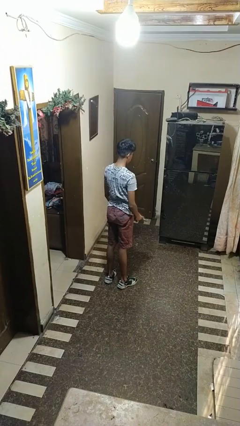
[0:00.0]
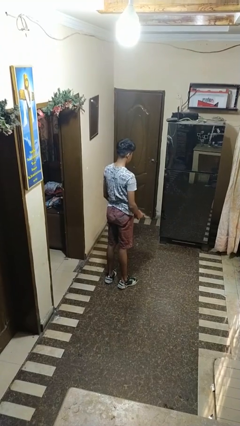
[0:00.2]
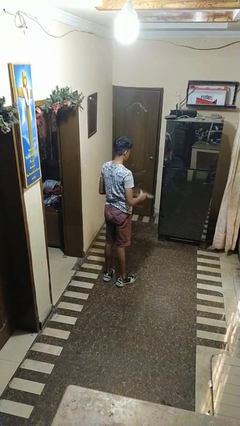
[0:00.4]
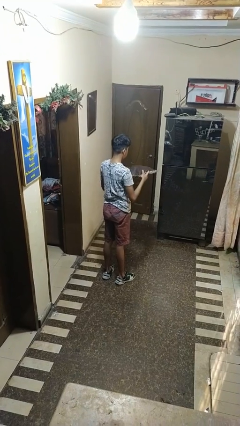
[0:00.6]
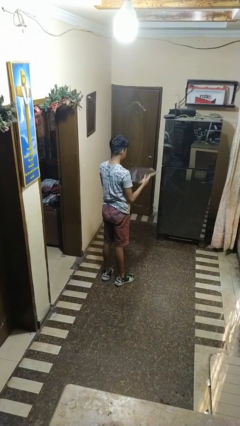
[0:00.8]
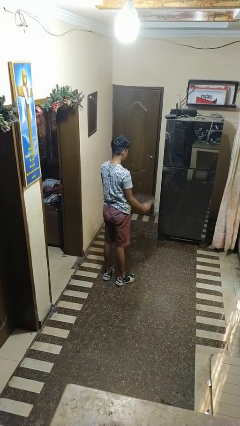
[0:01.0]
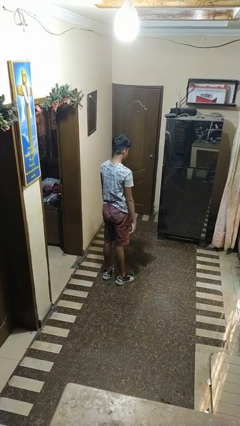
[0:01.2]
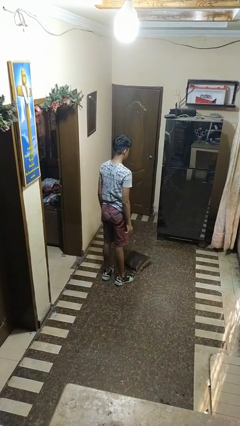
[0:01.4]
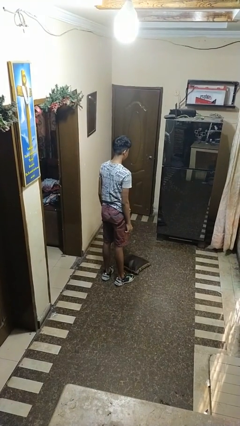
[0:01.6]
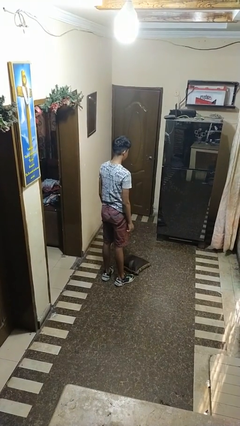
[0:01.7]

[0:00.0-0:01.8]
person throws object to ground

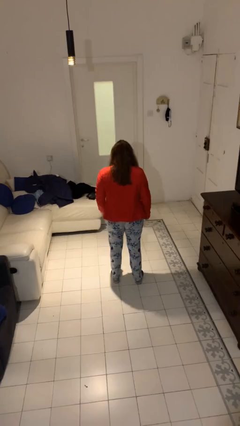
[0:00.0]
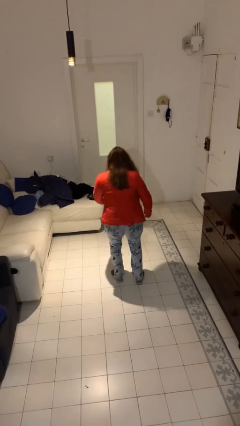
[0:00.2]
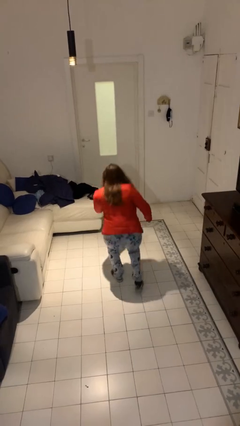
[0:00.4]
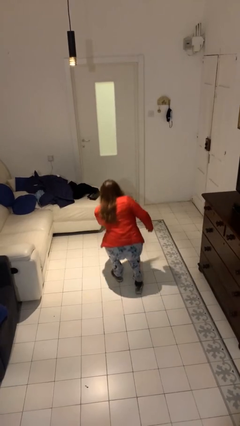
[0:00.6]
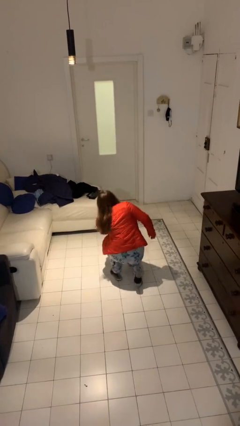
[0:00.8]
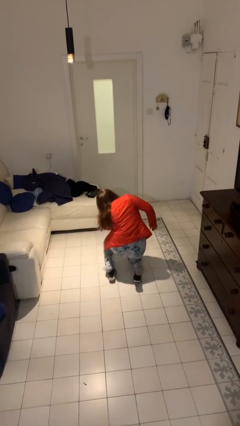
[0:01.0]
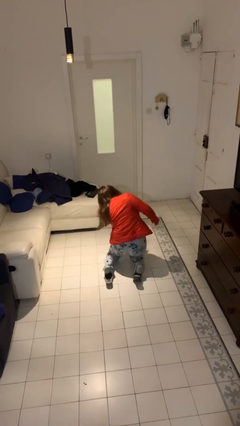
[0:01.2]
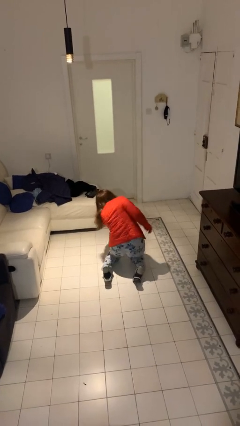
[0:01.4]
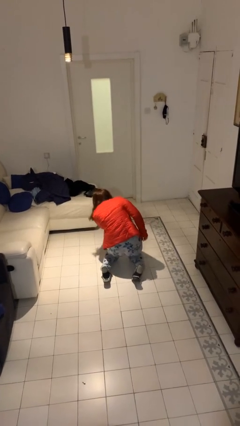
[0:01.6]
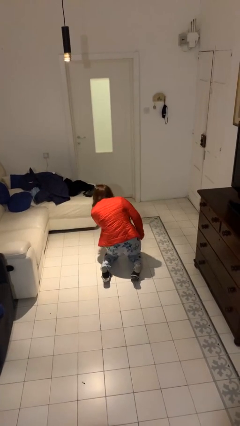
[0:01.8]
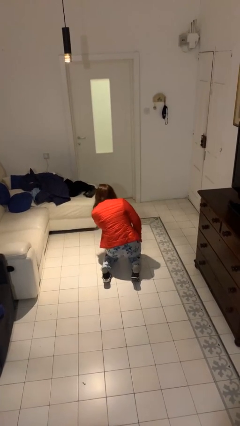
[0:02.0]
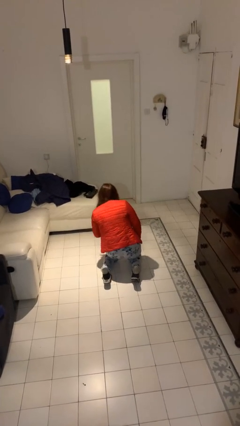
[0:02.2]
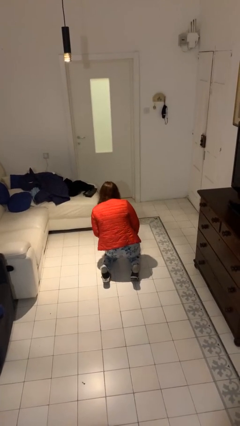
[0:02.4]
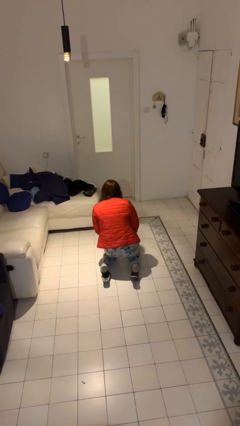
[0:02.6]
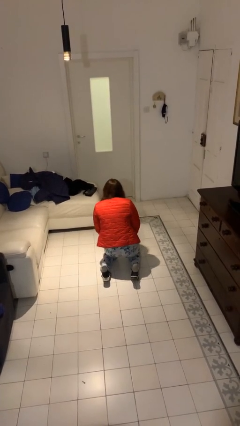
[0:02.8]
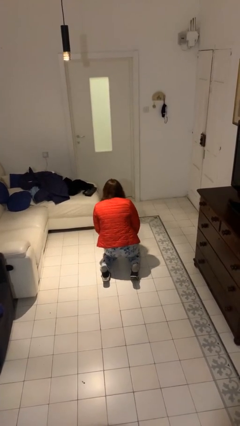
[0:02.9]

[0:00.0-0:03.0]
person falls while standing

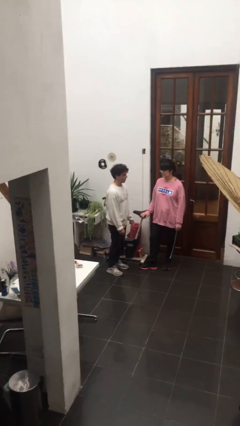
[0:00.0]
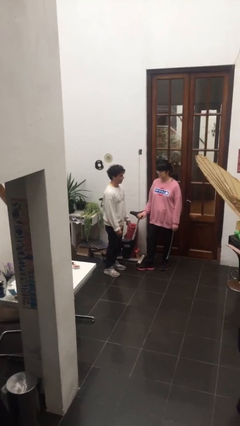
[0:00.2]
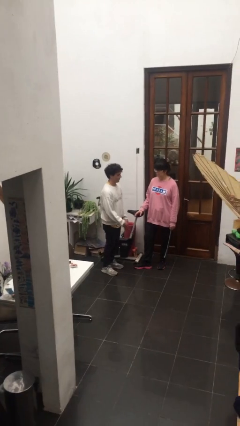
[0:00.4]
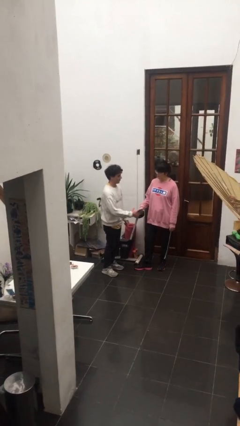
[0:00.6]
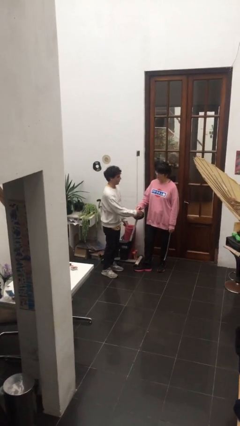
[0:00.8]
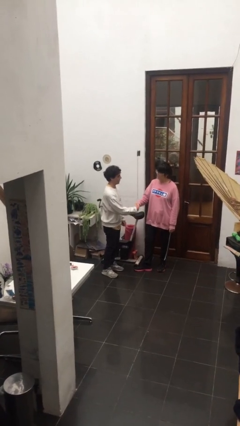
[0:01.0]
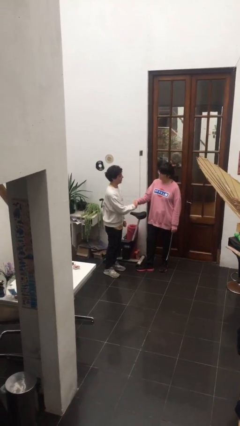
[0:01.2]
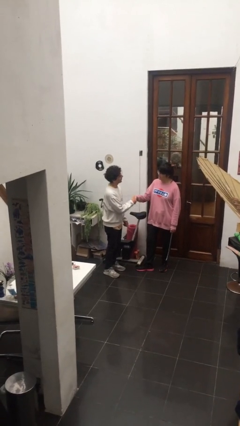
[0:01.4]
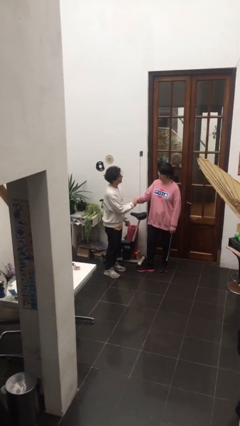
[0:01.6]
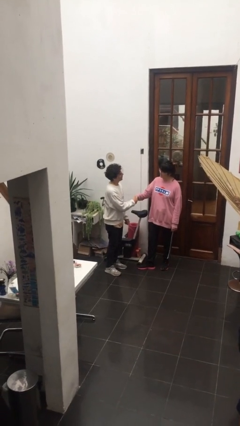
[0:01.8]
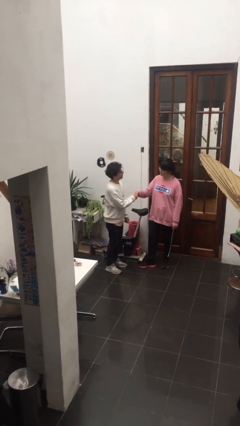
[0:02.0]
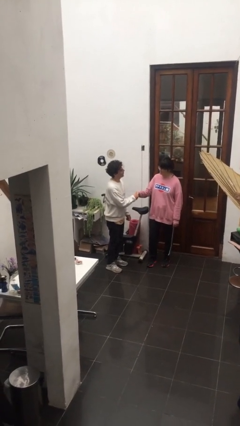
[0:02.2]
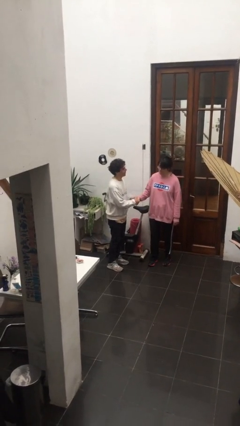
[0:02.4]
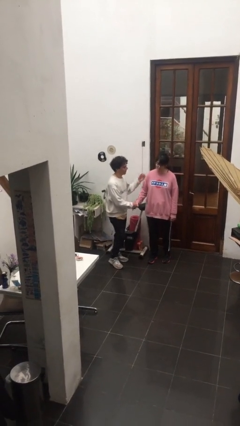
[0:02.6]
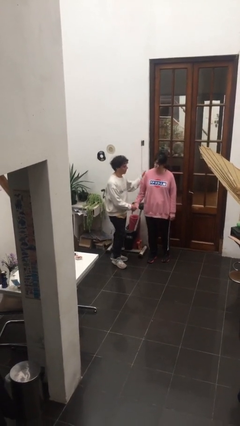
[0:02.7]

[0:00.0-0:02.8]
person shakes hand

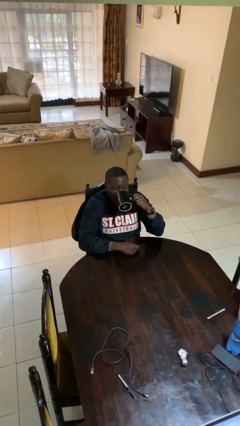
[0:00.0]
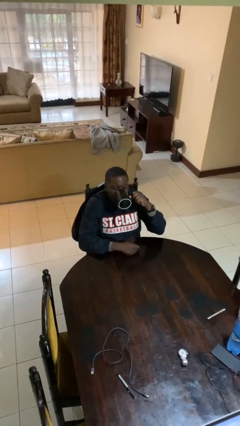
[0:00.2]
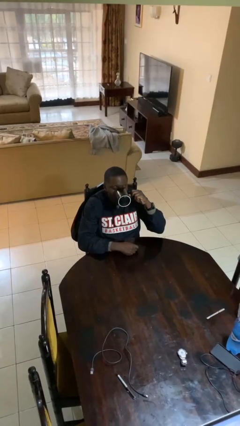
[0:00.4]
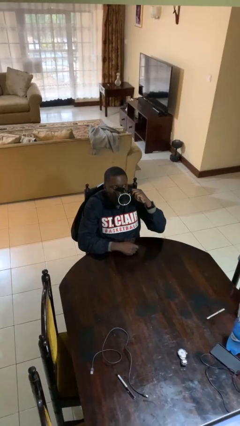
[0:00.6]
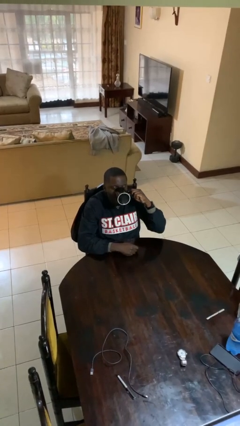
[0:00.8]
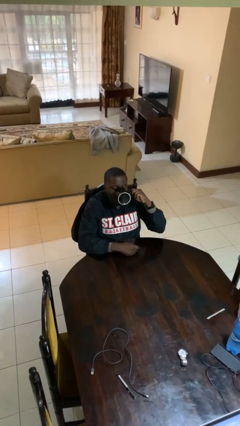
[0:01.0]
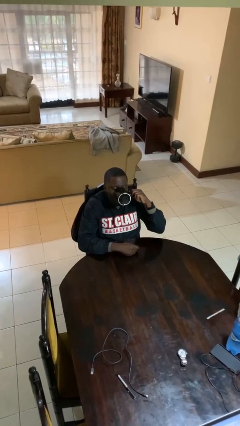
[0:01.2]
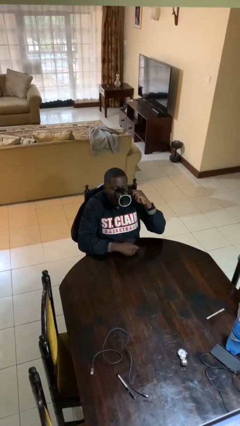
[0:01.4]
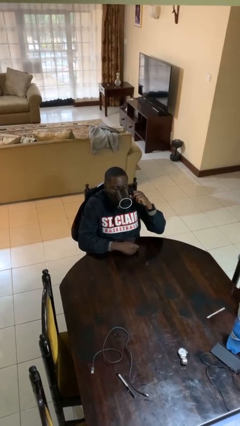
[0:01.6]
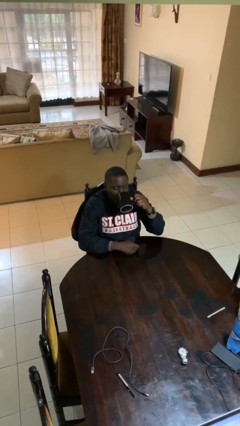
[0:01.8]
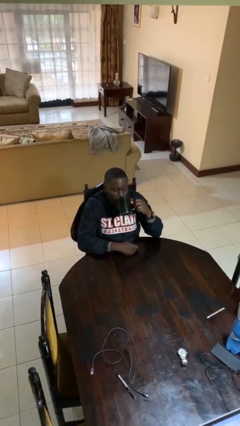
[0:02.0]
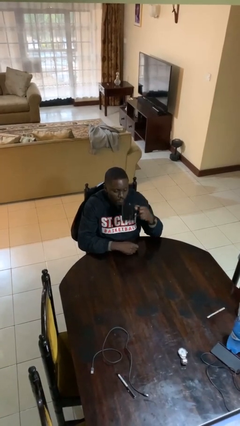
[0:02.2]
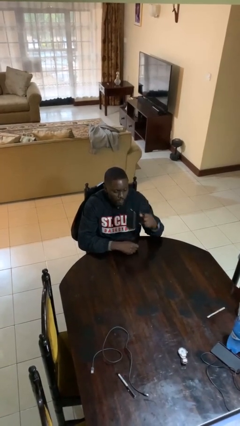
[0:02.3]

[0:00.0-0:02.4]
person drinks from mug

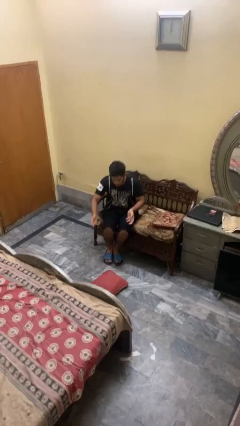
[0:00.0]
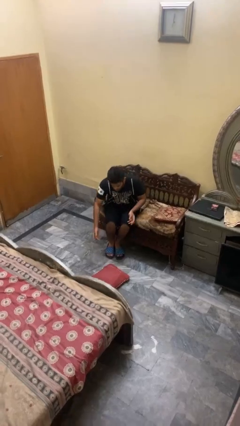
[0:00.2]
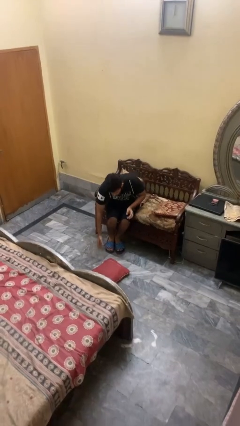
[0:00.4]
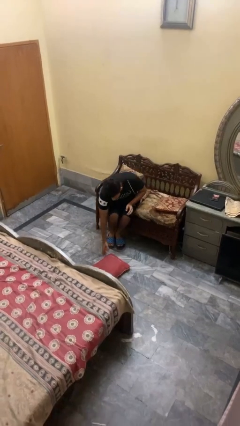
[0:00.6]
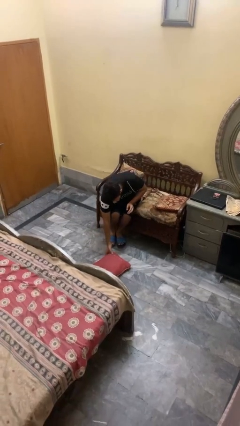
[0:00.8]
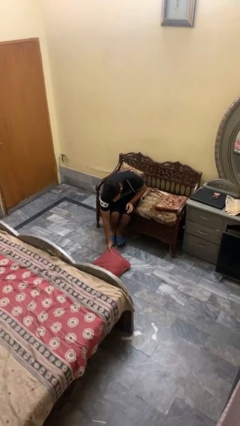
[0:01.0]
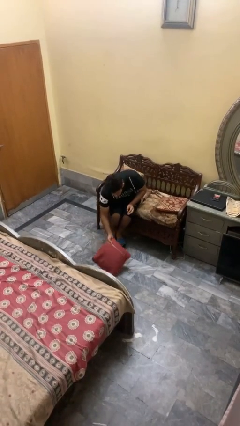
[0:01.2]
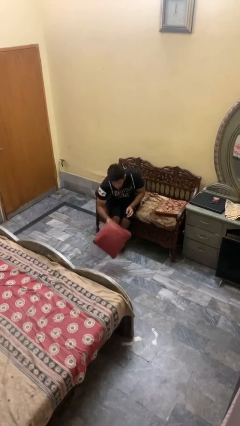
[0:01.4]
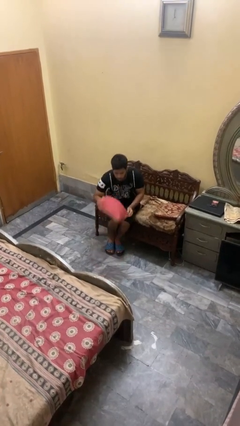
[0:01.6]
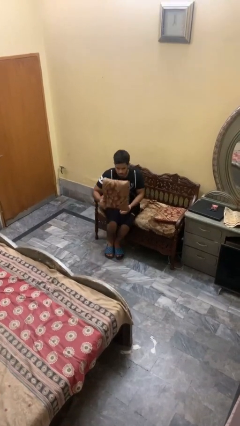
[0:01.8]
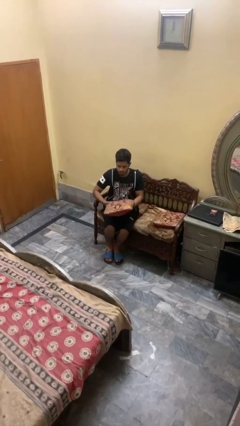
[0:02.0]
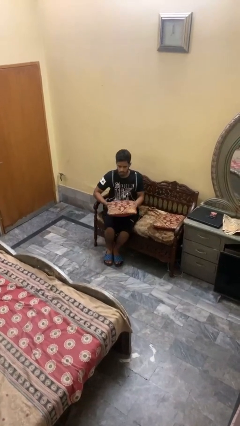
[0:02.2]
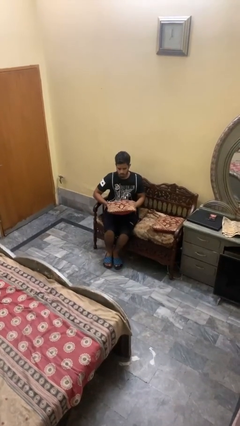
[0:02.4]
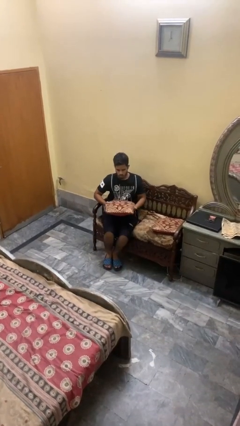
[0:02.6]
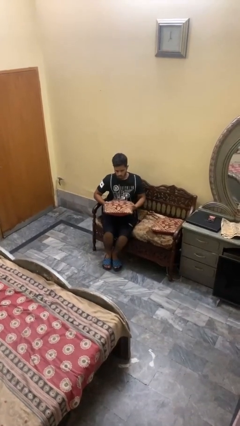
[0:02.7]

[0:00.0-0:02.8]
person picks up object from floor

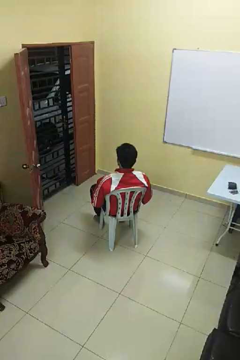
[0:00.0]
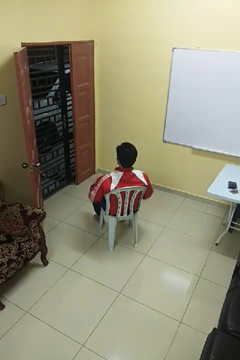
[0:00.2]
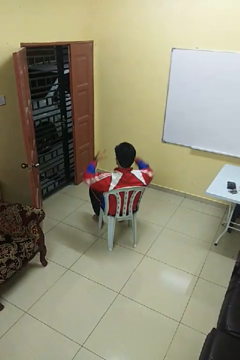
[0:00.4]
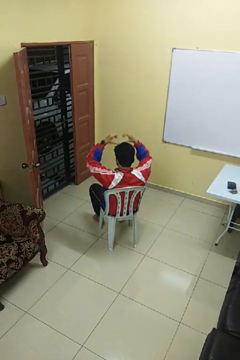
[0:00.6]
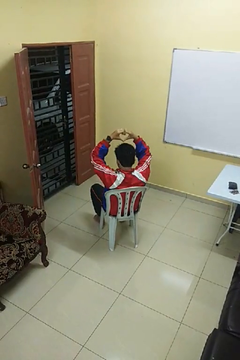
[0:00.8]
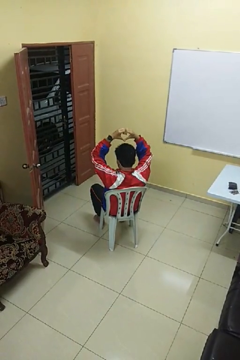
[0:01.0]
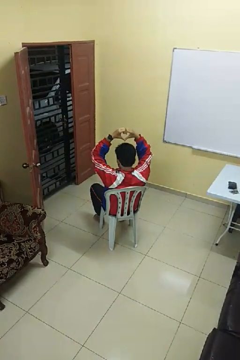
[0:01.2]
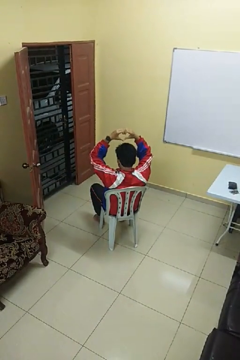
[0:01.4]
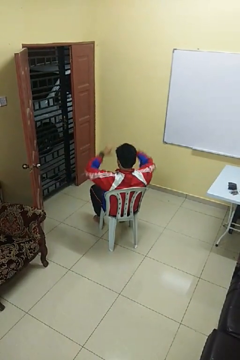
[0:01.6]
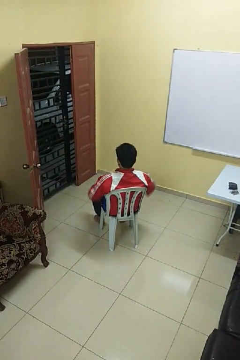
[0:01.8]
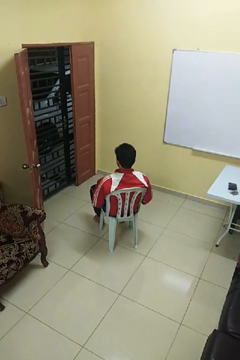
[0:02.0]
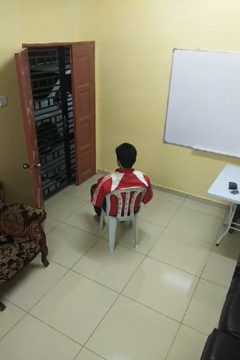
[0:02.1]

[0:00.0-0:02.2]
person gestures heart

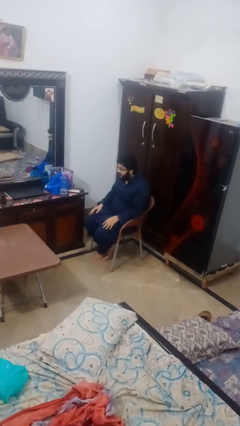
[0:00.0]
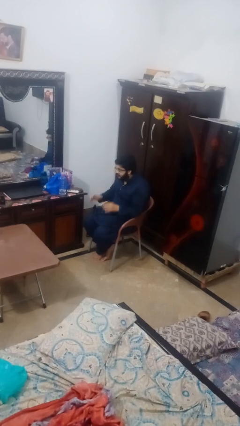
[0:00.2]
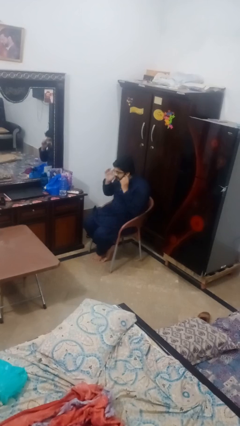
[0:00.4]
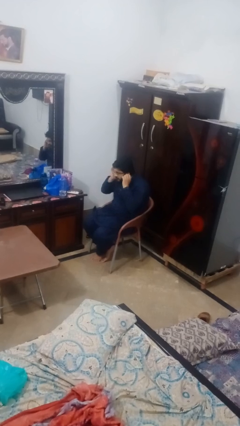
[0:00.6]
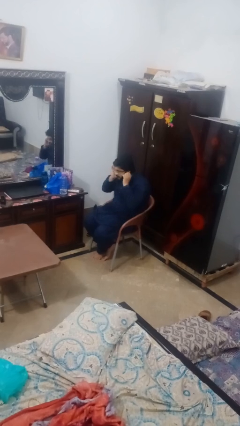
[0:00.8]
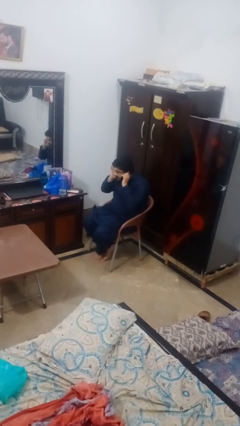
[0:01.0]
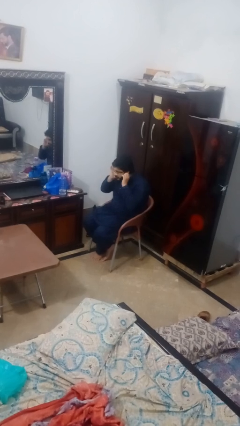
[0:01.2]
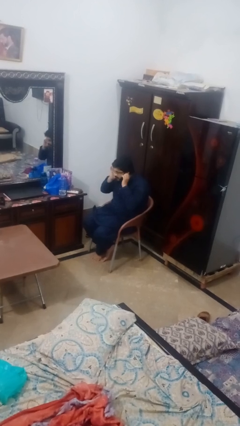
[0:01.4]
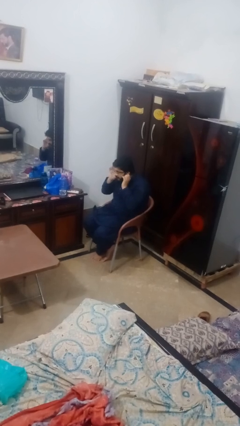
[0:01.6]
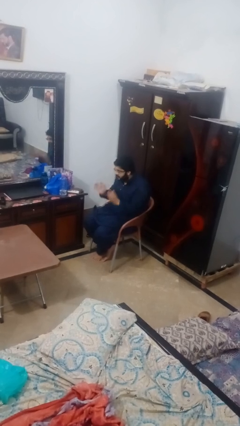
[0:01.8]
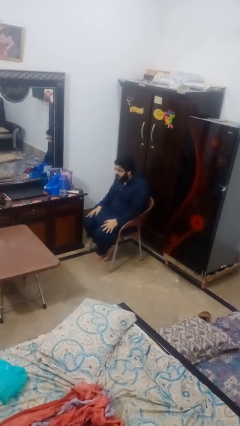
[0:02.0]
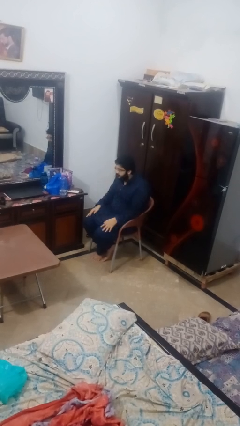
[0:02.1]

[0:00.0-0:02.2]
person puts fingers in ear

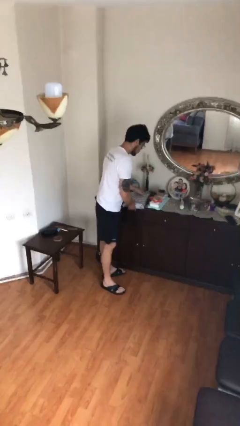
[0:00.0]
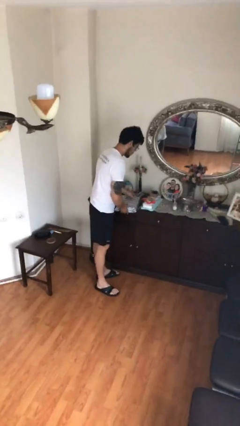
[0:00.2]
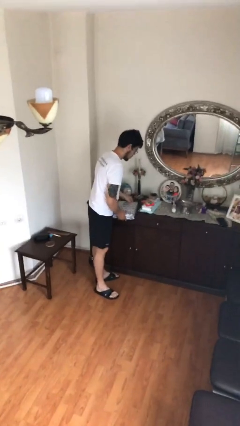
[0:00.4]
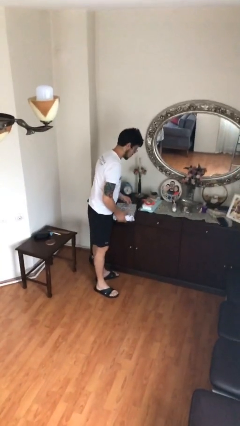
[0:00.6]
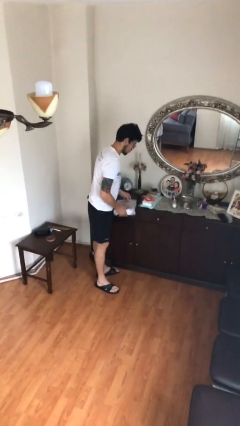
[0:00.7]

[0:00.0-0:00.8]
person picks up object from table
